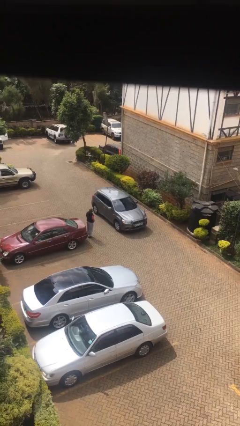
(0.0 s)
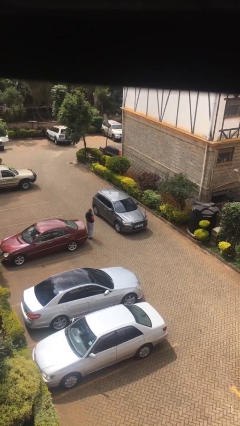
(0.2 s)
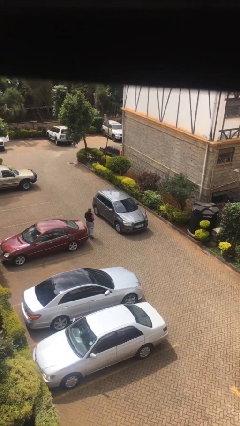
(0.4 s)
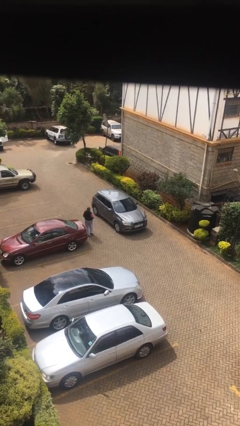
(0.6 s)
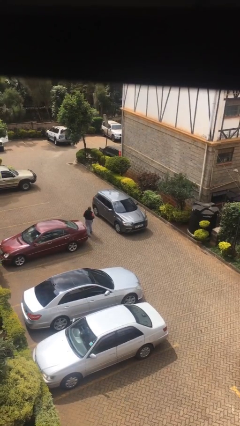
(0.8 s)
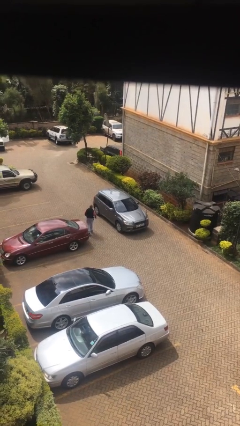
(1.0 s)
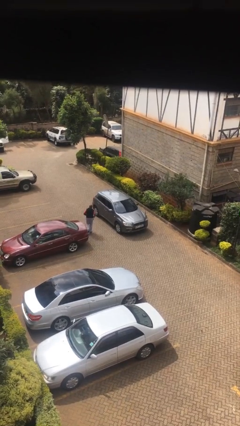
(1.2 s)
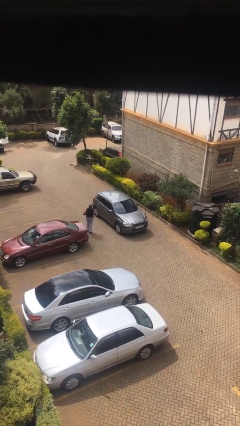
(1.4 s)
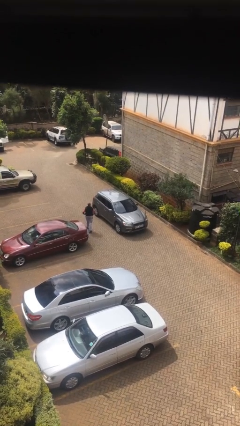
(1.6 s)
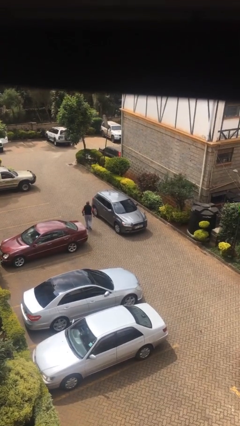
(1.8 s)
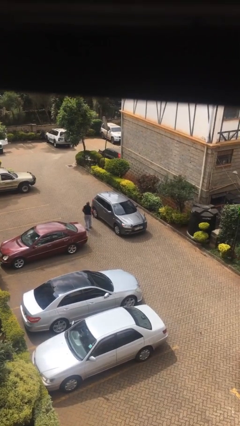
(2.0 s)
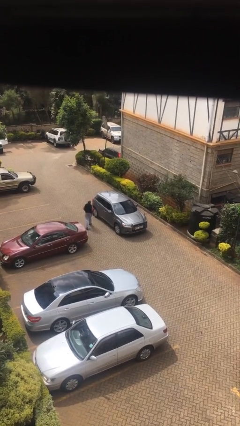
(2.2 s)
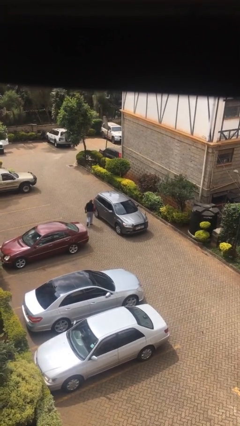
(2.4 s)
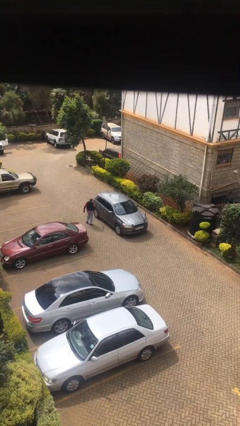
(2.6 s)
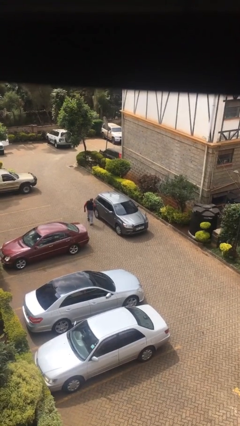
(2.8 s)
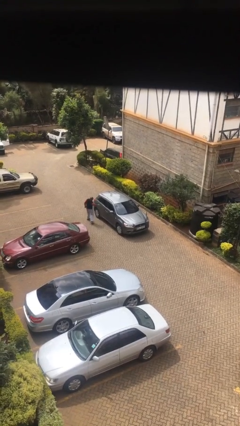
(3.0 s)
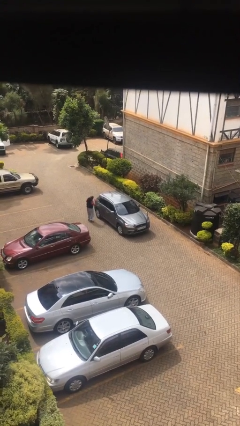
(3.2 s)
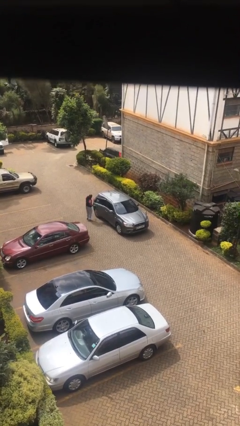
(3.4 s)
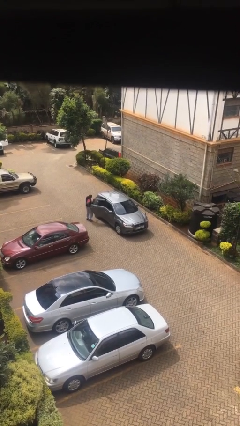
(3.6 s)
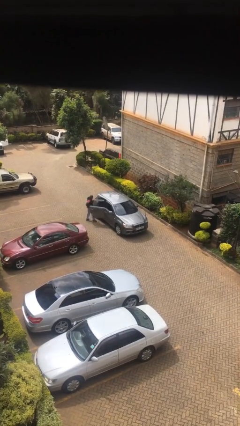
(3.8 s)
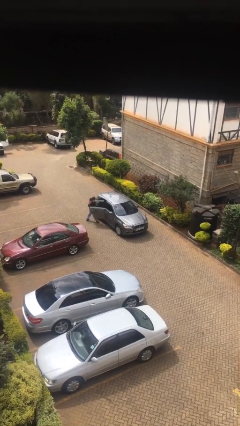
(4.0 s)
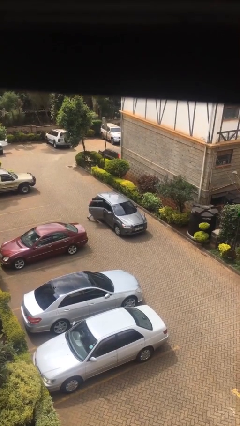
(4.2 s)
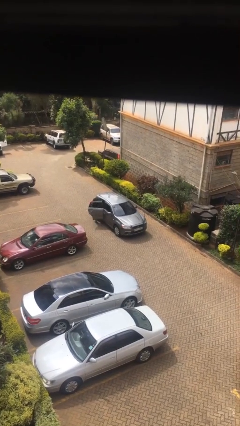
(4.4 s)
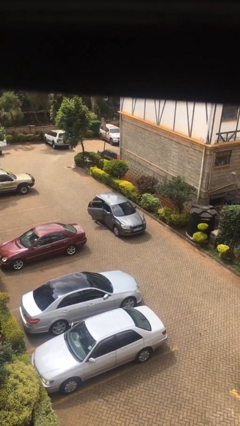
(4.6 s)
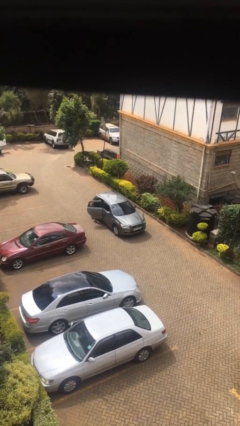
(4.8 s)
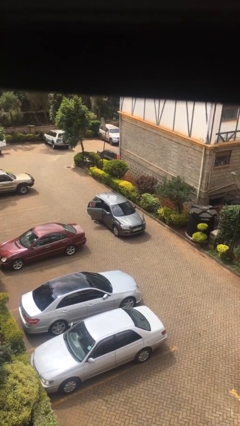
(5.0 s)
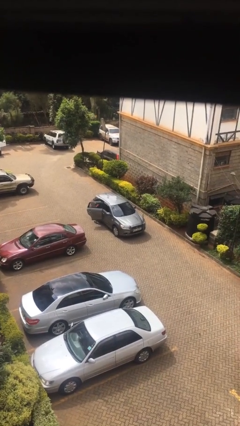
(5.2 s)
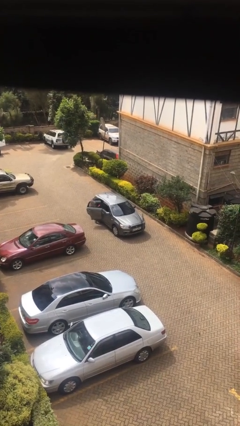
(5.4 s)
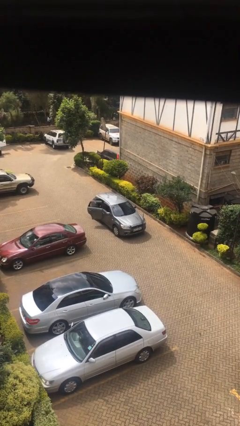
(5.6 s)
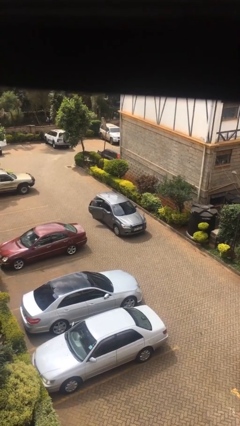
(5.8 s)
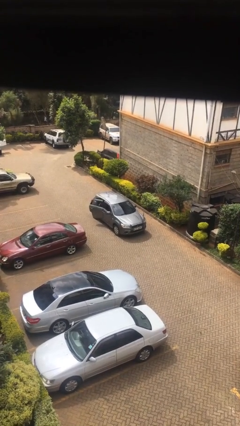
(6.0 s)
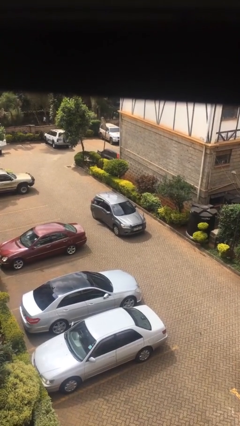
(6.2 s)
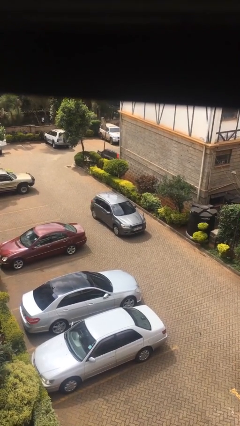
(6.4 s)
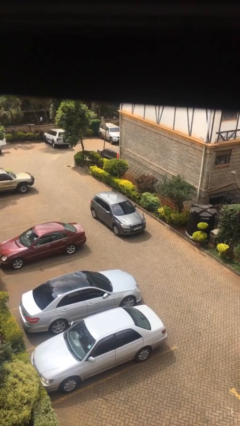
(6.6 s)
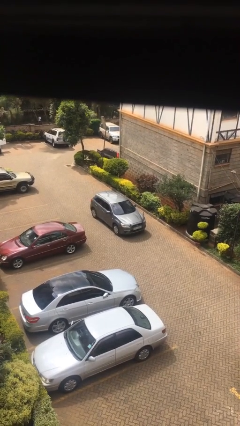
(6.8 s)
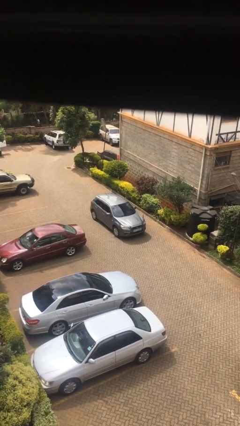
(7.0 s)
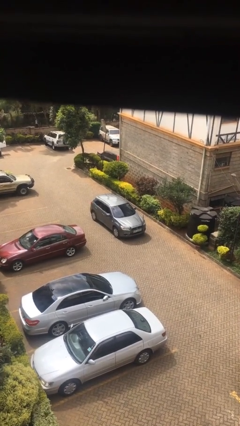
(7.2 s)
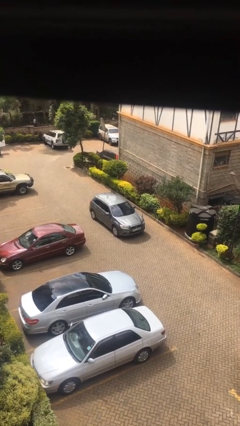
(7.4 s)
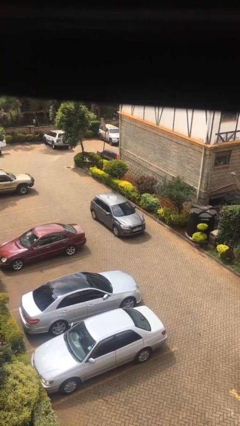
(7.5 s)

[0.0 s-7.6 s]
car picks up person

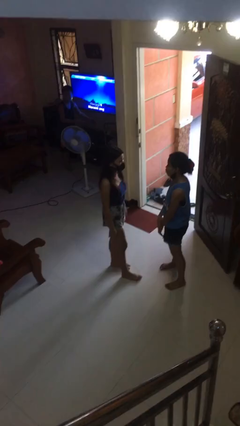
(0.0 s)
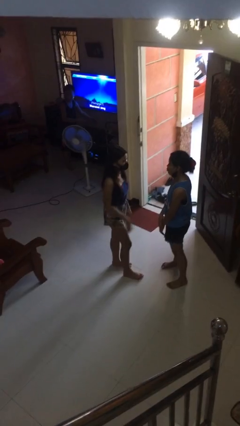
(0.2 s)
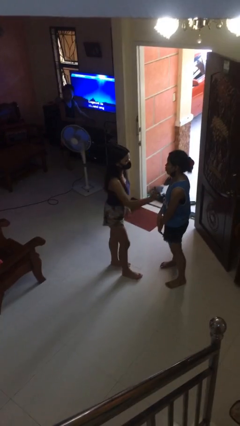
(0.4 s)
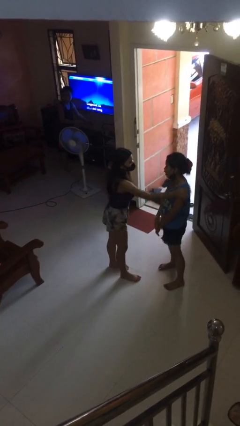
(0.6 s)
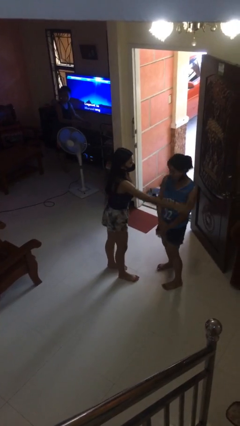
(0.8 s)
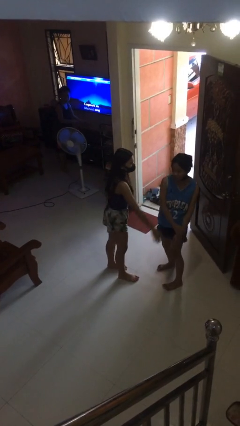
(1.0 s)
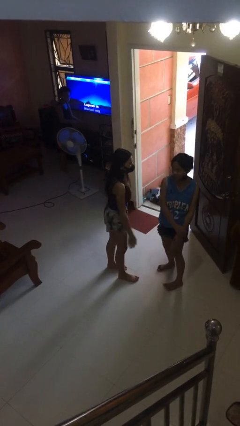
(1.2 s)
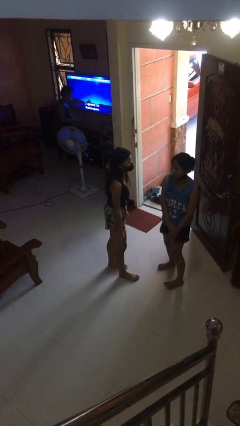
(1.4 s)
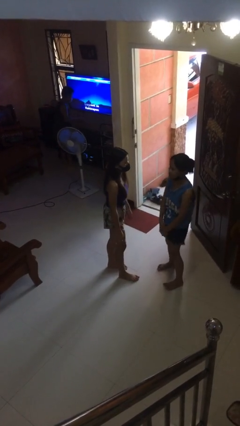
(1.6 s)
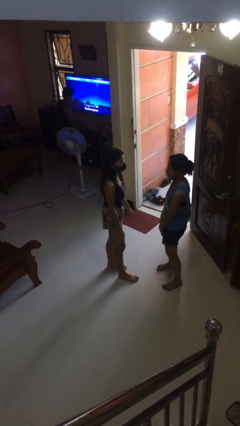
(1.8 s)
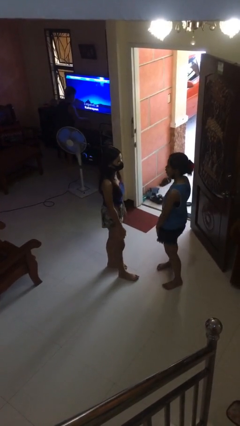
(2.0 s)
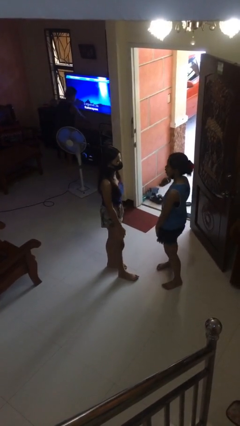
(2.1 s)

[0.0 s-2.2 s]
person shoves person

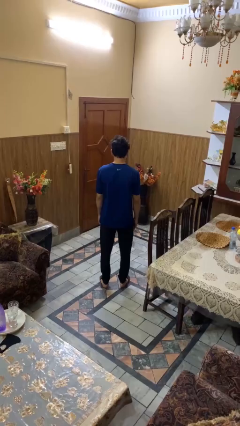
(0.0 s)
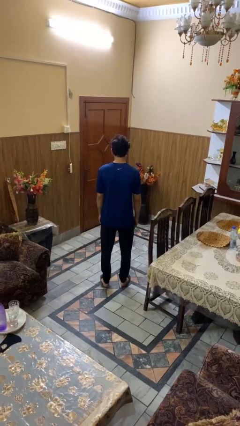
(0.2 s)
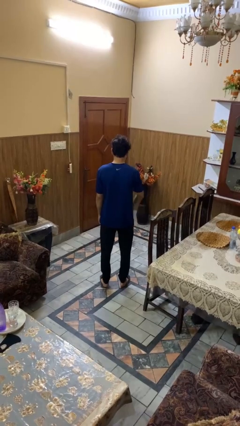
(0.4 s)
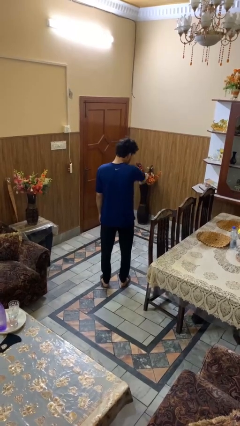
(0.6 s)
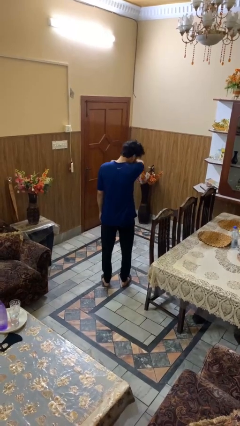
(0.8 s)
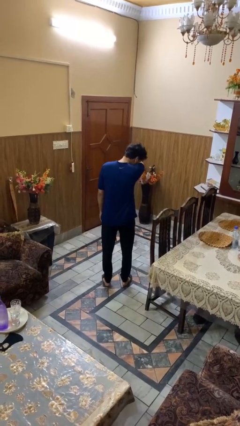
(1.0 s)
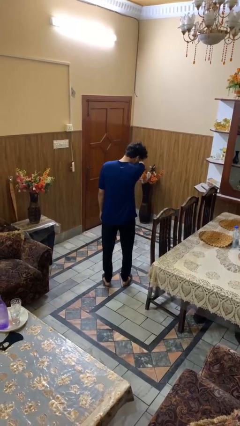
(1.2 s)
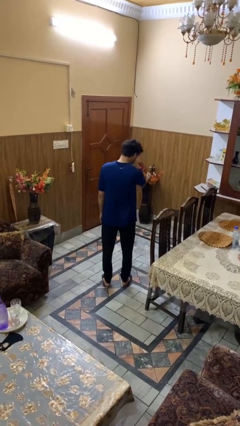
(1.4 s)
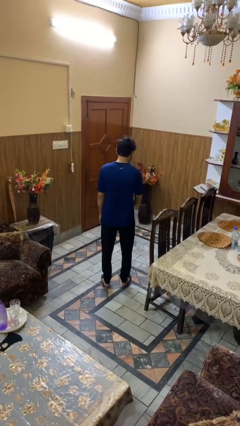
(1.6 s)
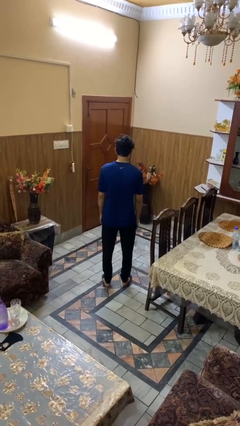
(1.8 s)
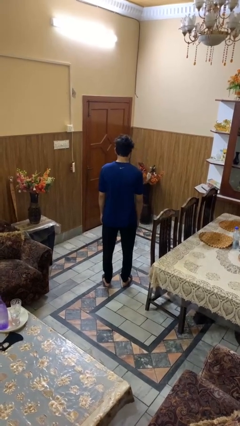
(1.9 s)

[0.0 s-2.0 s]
person sneezes into arm

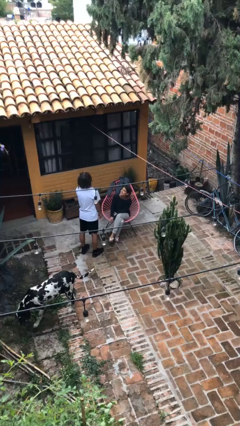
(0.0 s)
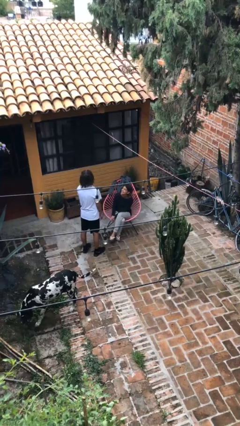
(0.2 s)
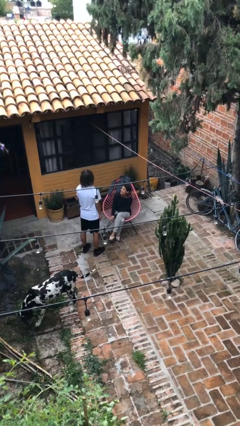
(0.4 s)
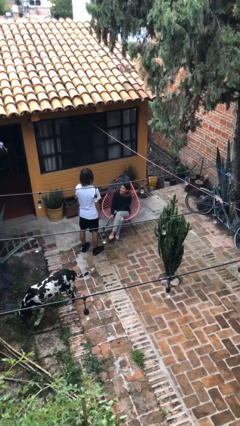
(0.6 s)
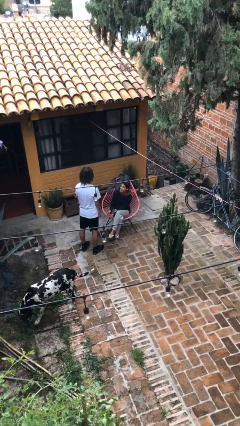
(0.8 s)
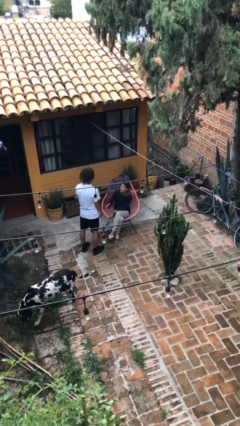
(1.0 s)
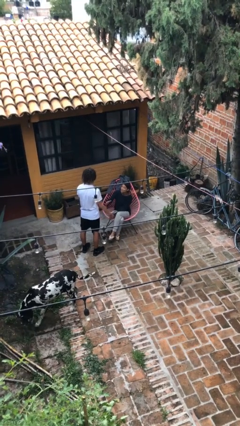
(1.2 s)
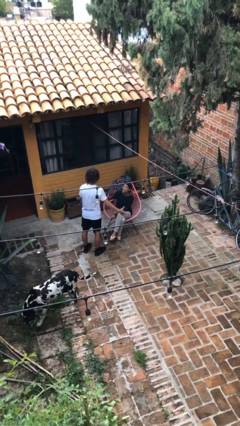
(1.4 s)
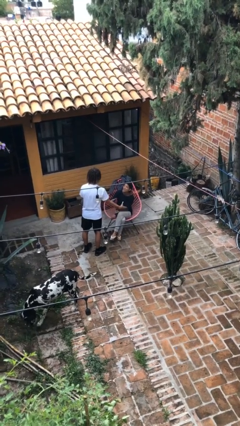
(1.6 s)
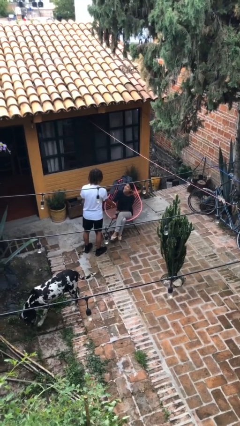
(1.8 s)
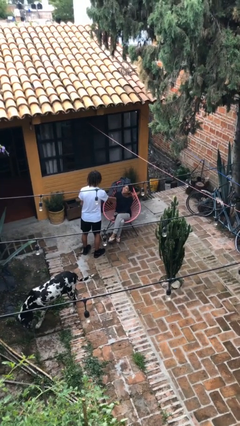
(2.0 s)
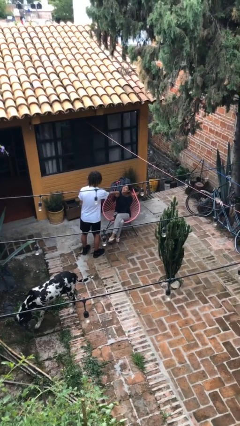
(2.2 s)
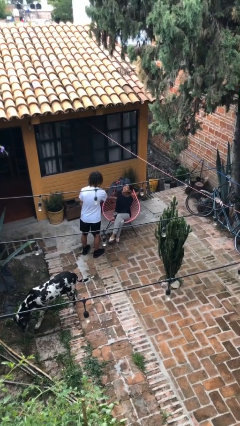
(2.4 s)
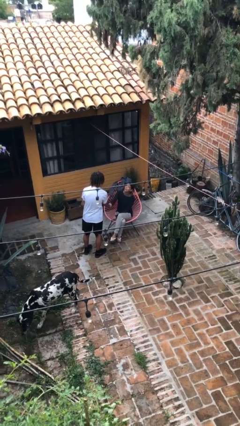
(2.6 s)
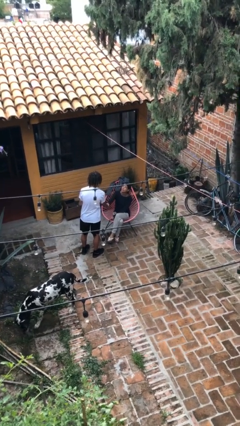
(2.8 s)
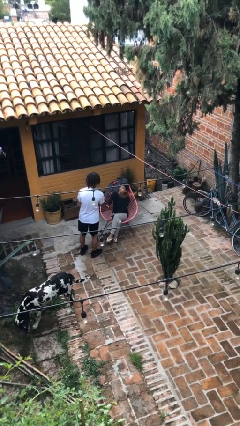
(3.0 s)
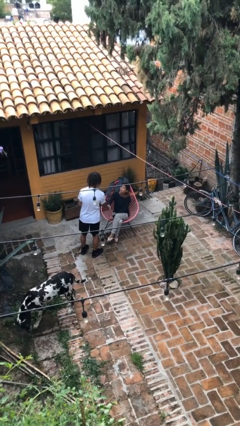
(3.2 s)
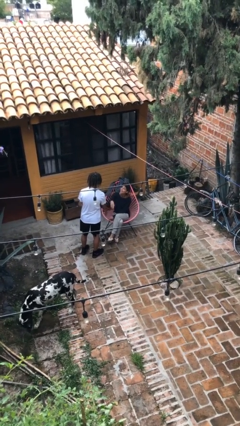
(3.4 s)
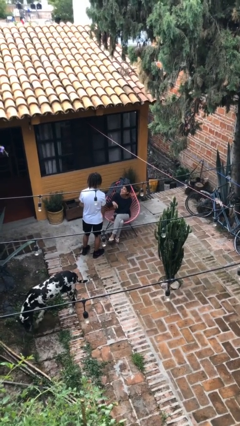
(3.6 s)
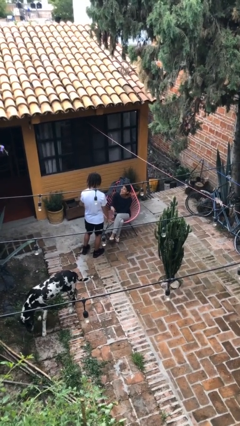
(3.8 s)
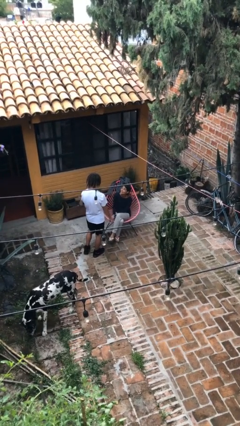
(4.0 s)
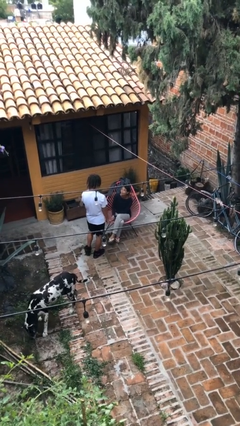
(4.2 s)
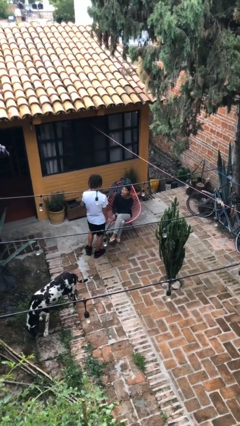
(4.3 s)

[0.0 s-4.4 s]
person shakes hand

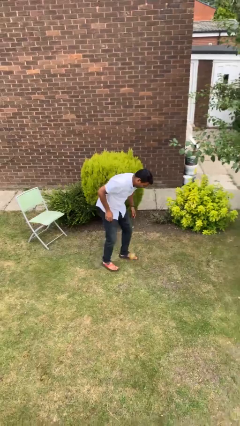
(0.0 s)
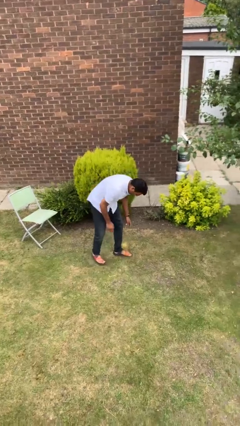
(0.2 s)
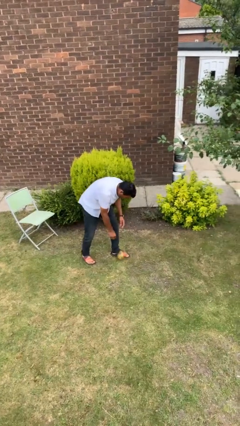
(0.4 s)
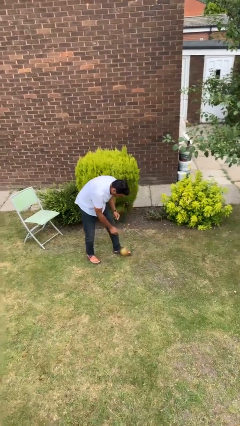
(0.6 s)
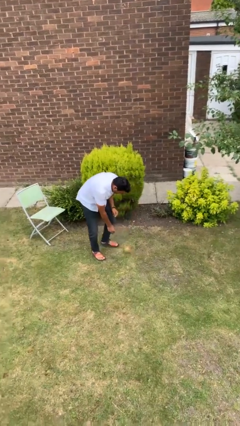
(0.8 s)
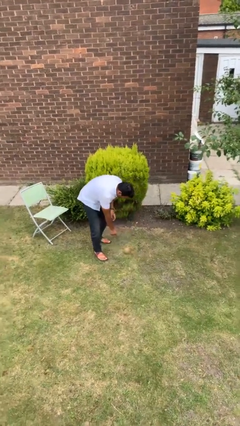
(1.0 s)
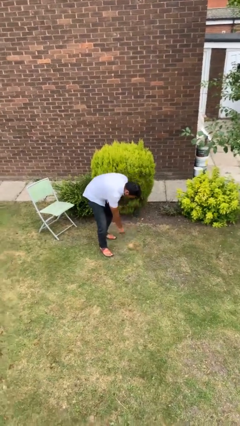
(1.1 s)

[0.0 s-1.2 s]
person drops object

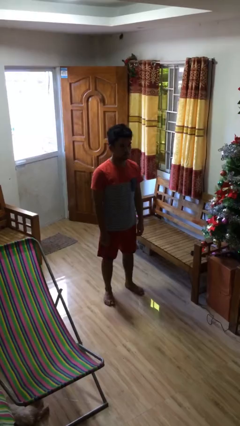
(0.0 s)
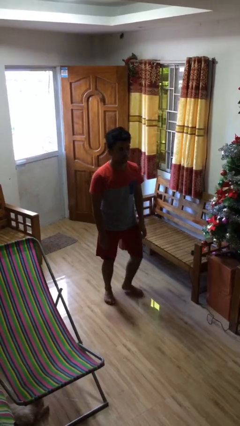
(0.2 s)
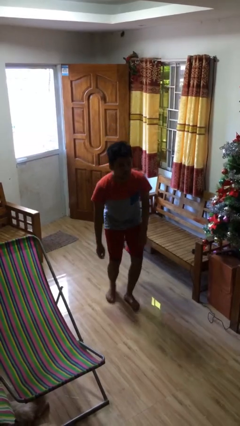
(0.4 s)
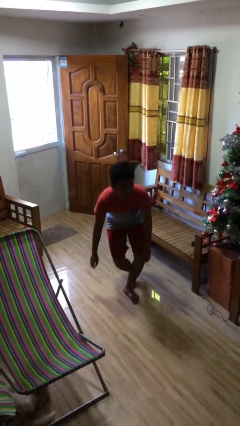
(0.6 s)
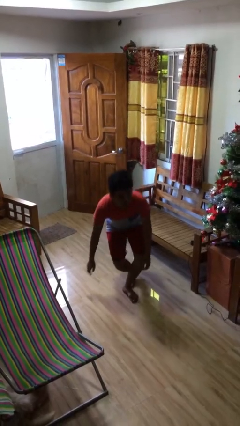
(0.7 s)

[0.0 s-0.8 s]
person stands up
